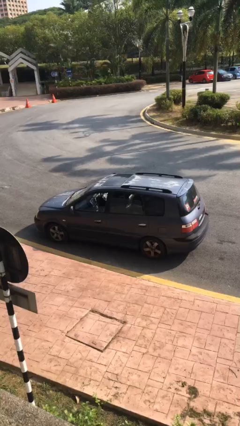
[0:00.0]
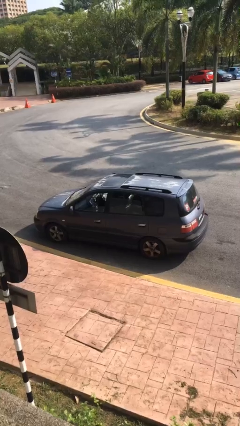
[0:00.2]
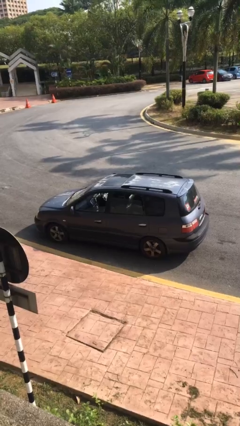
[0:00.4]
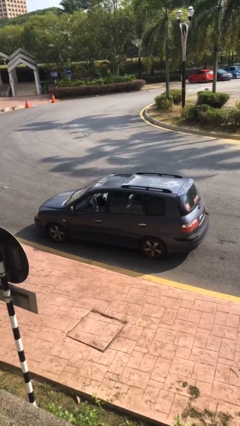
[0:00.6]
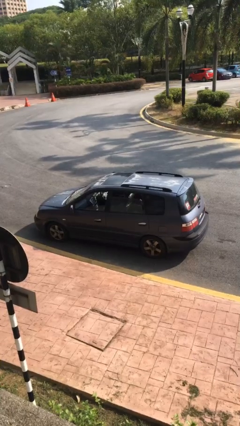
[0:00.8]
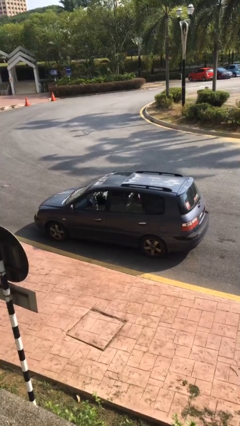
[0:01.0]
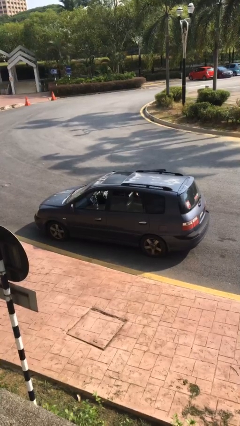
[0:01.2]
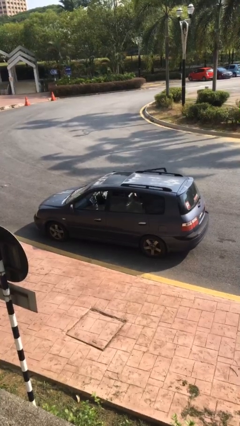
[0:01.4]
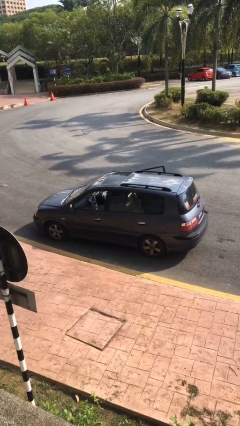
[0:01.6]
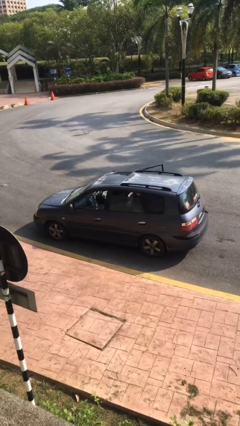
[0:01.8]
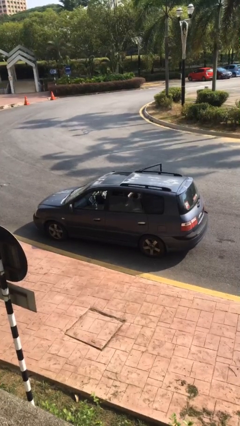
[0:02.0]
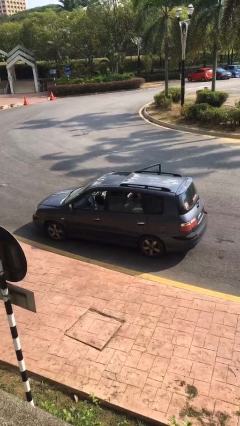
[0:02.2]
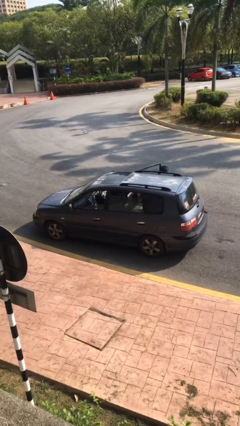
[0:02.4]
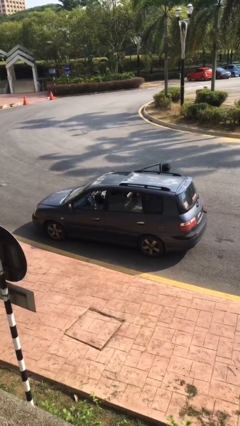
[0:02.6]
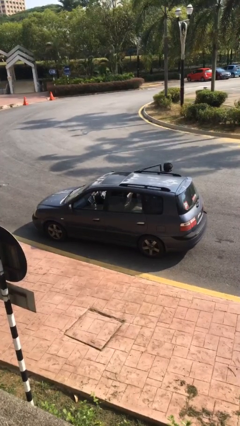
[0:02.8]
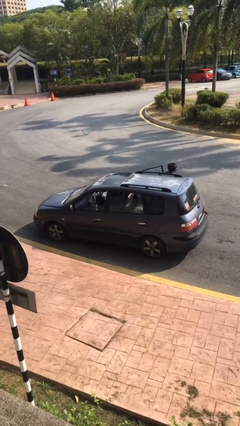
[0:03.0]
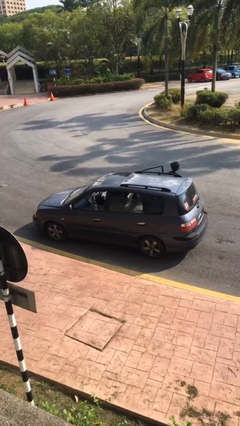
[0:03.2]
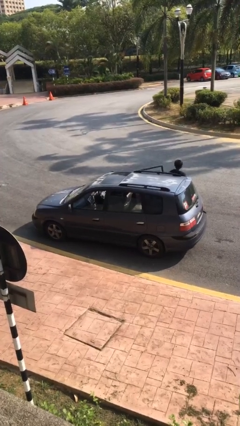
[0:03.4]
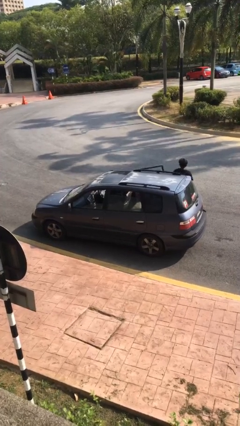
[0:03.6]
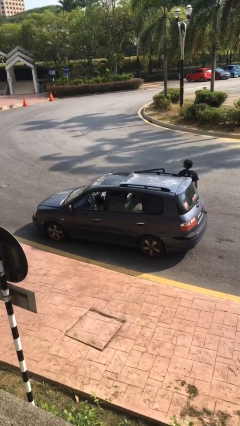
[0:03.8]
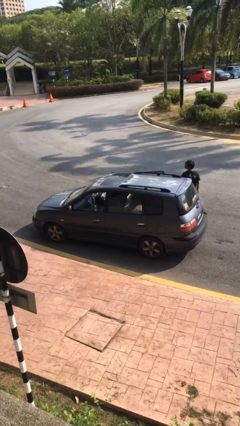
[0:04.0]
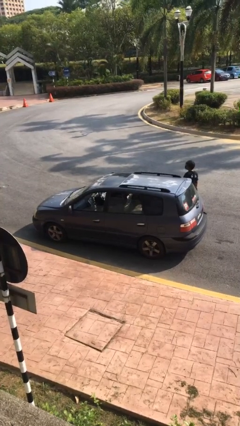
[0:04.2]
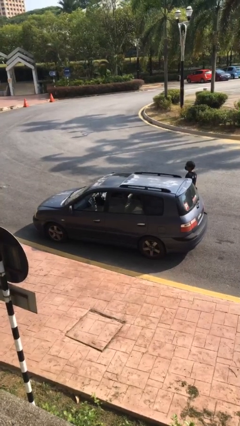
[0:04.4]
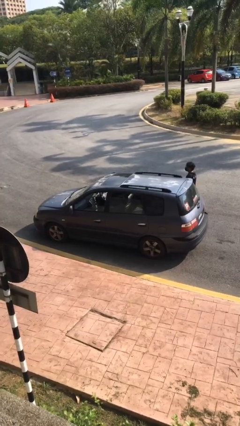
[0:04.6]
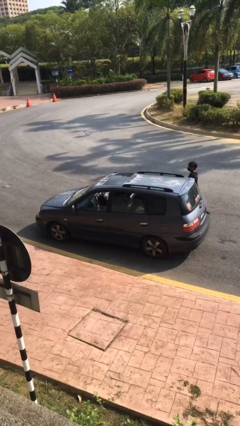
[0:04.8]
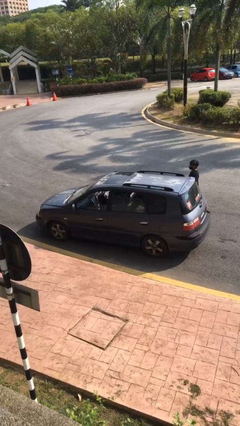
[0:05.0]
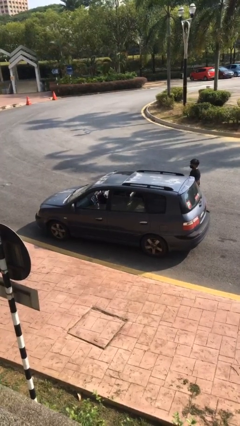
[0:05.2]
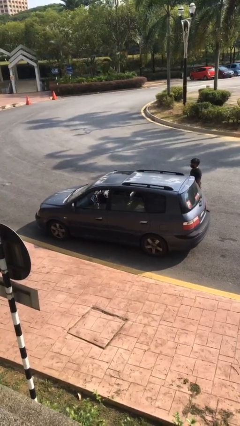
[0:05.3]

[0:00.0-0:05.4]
car drops off person

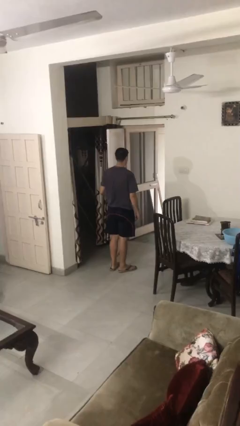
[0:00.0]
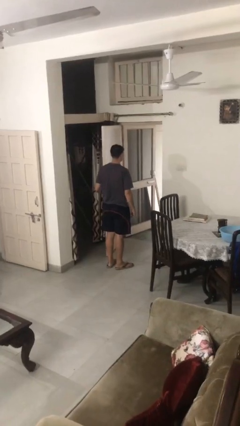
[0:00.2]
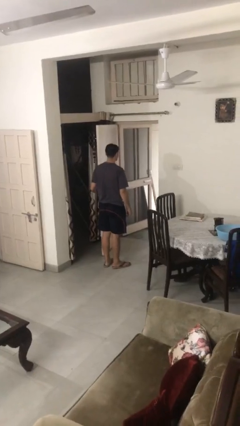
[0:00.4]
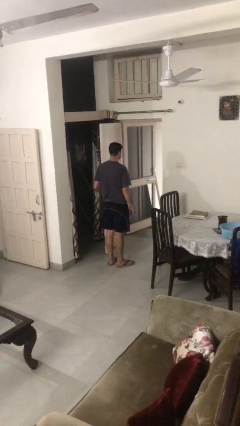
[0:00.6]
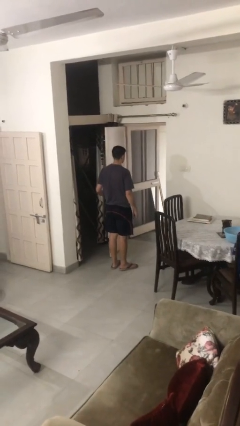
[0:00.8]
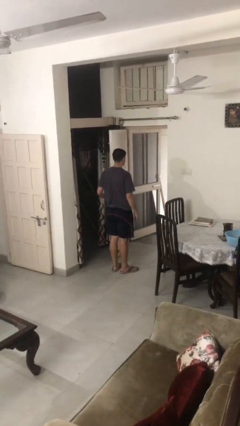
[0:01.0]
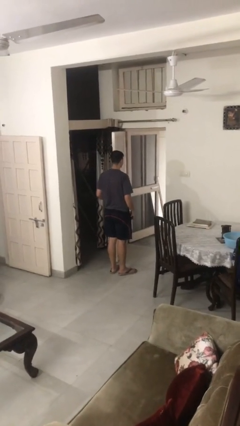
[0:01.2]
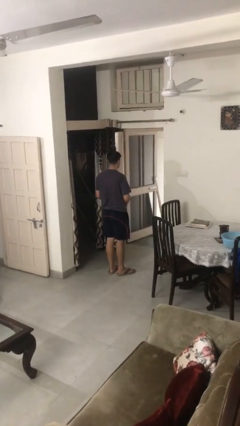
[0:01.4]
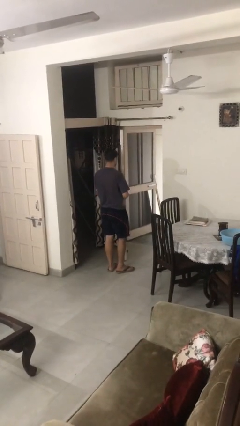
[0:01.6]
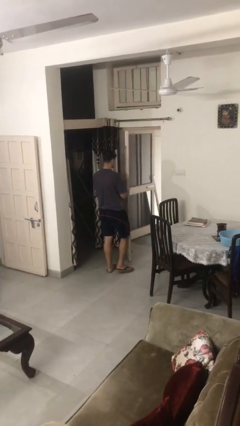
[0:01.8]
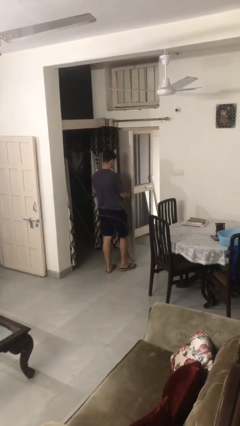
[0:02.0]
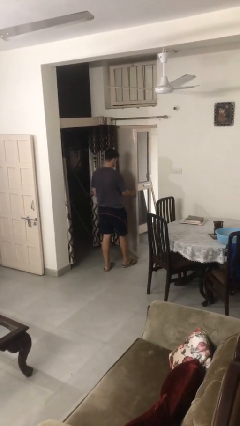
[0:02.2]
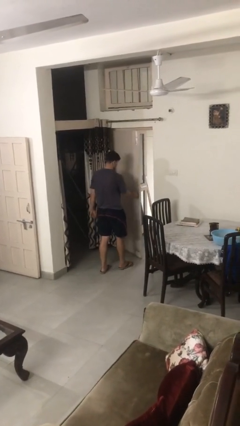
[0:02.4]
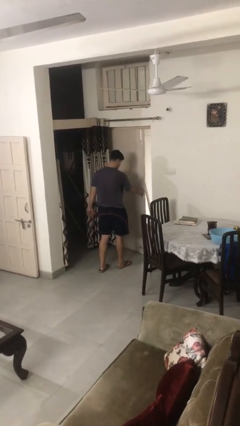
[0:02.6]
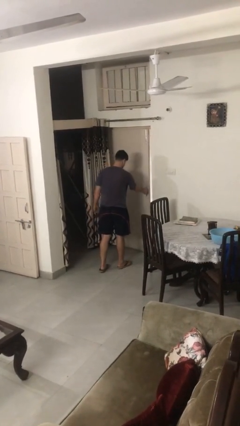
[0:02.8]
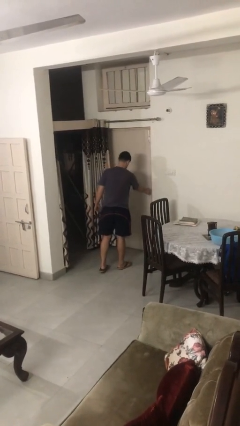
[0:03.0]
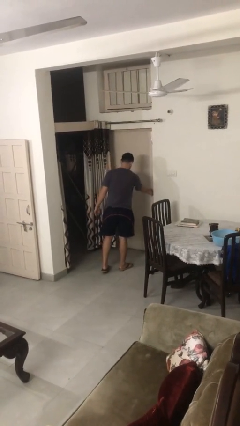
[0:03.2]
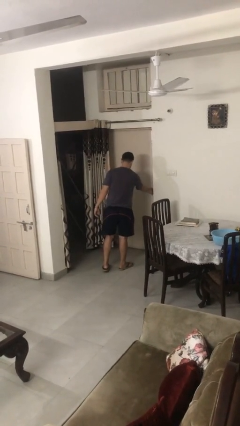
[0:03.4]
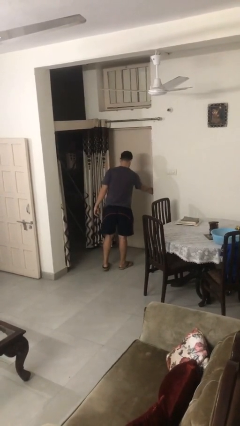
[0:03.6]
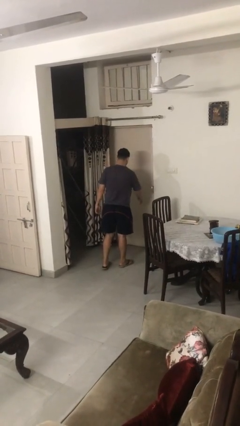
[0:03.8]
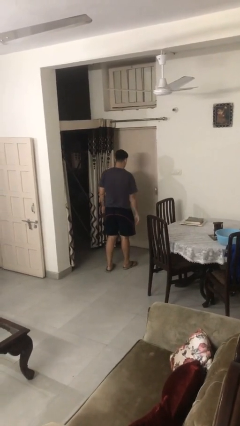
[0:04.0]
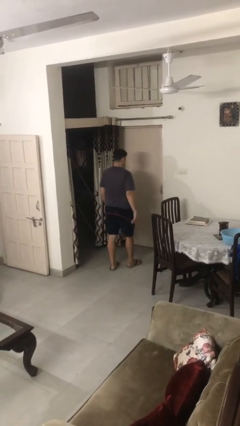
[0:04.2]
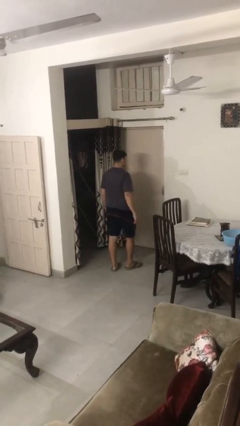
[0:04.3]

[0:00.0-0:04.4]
person closes facility door

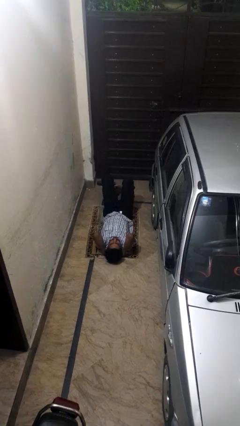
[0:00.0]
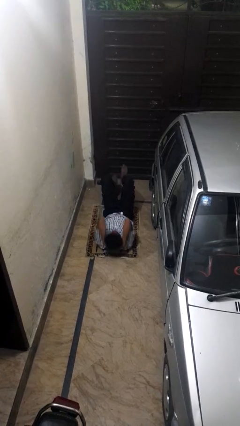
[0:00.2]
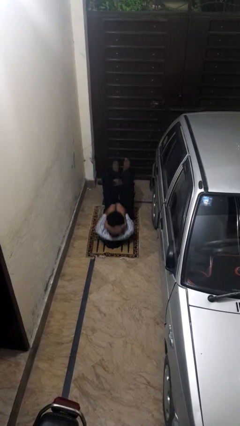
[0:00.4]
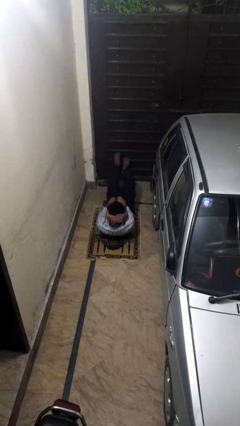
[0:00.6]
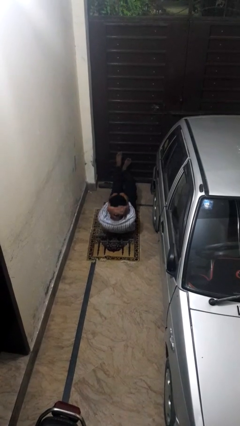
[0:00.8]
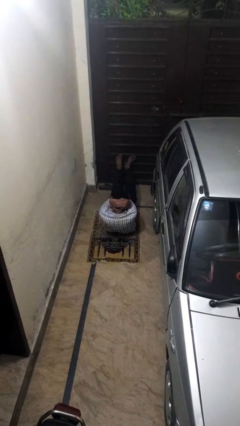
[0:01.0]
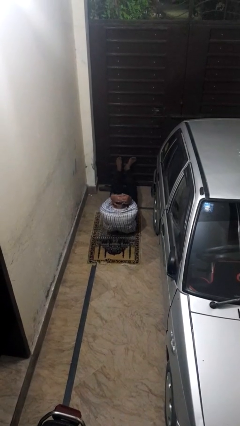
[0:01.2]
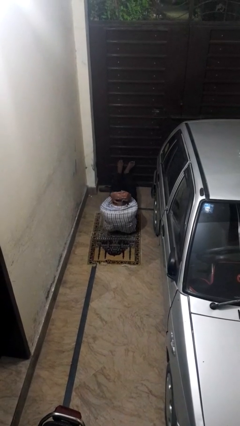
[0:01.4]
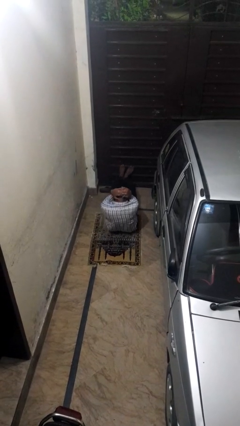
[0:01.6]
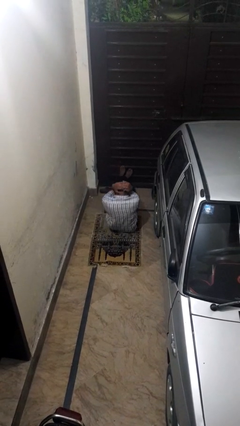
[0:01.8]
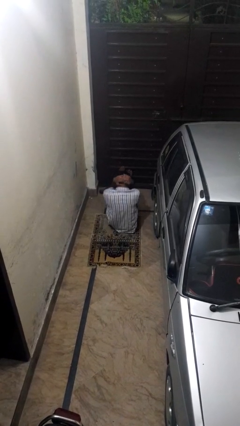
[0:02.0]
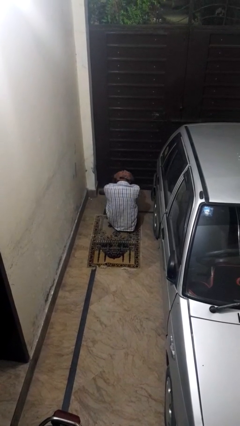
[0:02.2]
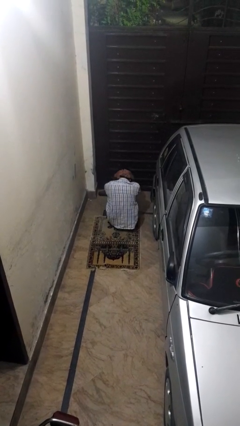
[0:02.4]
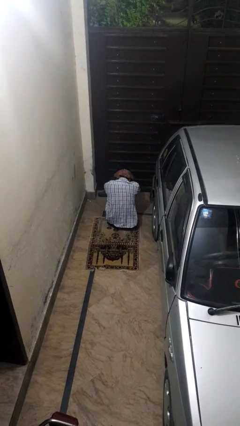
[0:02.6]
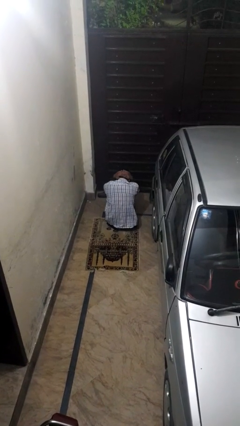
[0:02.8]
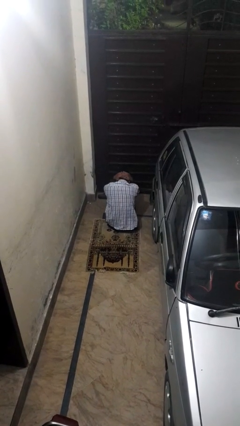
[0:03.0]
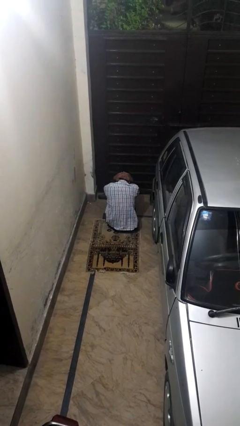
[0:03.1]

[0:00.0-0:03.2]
person exercises with situp

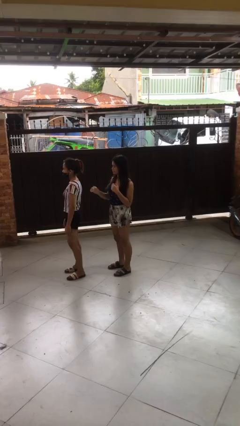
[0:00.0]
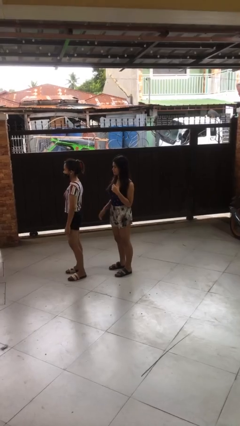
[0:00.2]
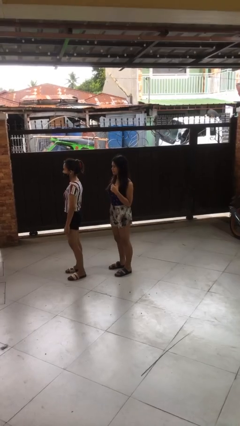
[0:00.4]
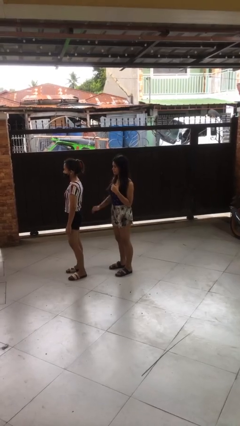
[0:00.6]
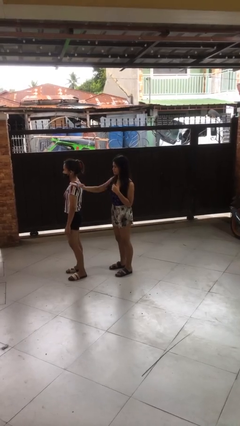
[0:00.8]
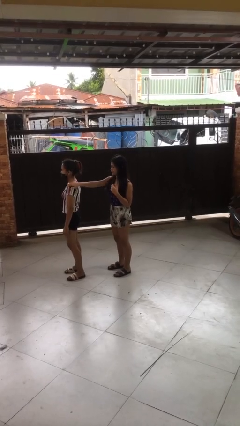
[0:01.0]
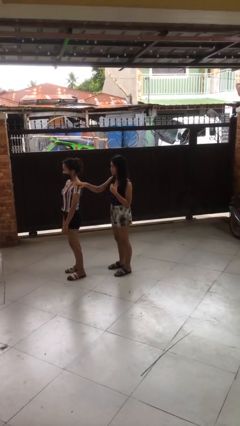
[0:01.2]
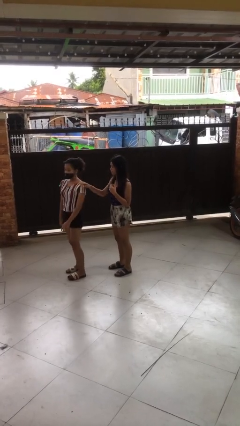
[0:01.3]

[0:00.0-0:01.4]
person grabs person by shoulder

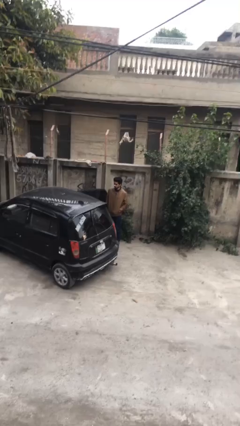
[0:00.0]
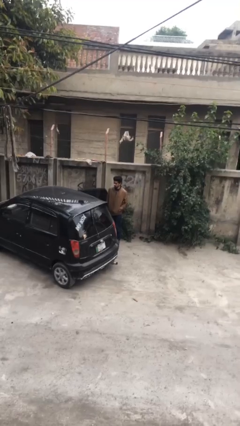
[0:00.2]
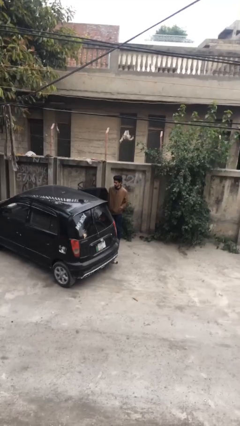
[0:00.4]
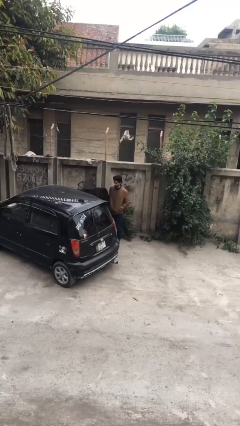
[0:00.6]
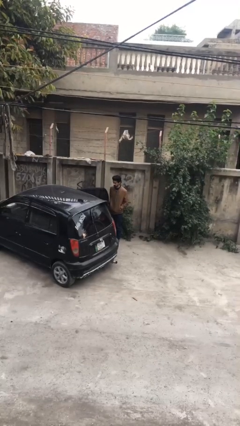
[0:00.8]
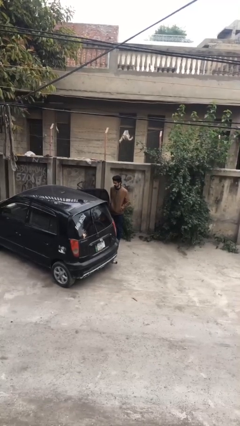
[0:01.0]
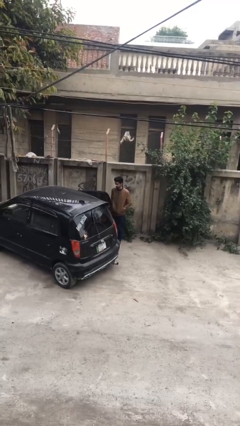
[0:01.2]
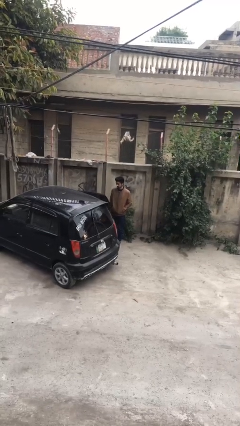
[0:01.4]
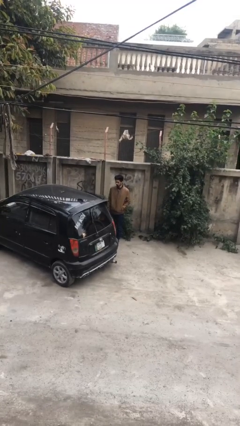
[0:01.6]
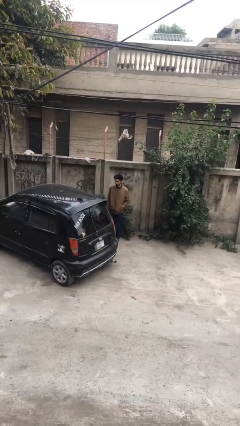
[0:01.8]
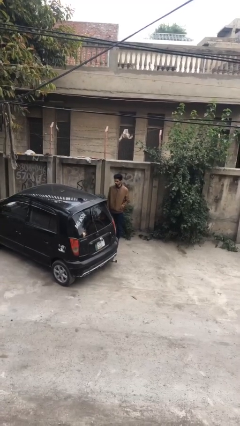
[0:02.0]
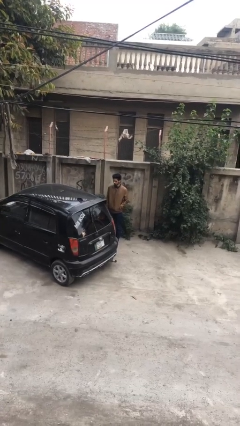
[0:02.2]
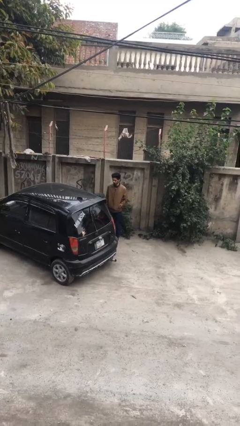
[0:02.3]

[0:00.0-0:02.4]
person closes car door

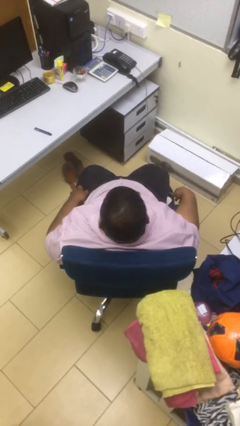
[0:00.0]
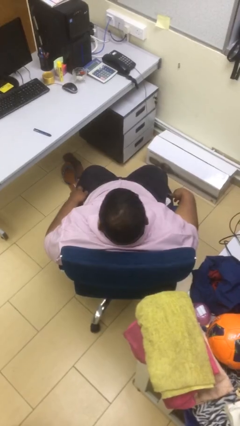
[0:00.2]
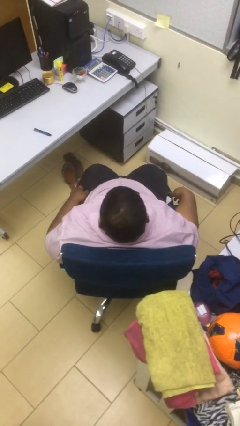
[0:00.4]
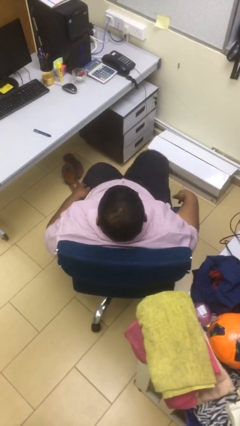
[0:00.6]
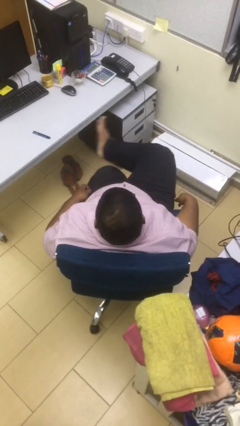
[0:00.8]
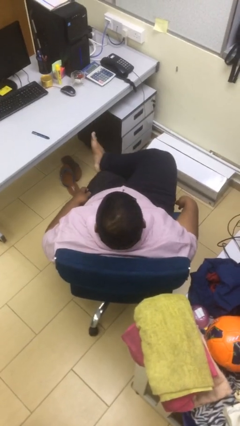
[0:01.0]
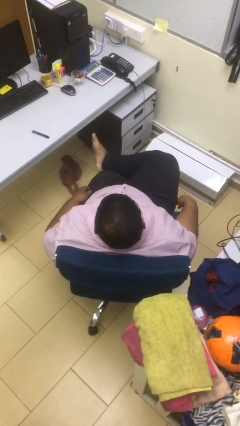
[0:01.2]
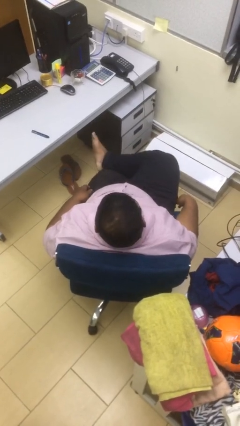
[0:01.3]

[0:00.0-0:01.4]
person crosses legs
